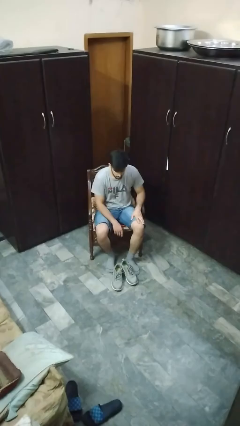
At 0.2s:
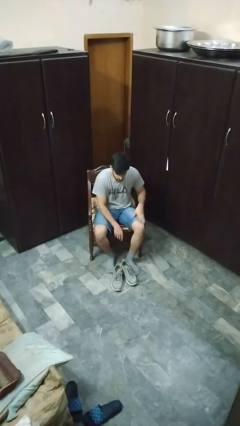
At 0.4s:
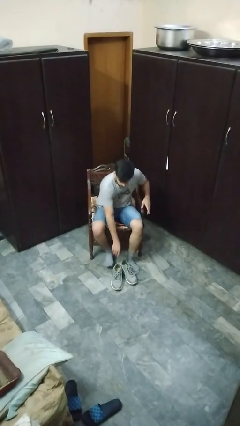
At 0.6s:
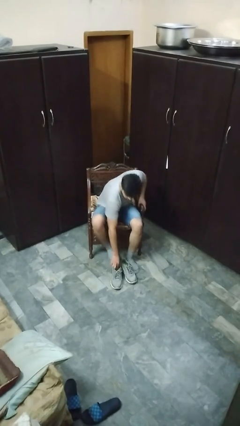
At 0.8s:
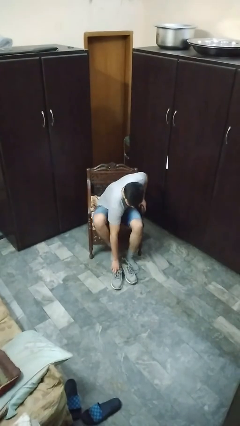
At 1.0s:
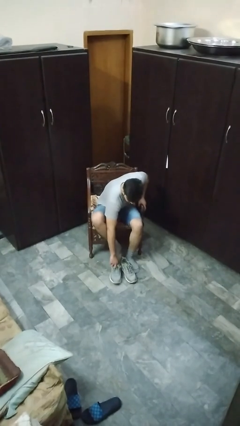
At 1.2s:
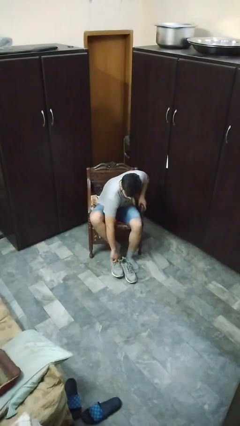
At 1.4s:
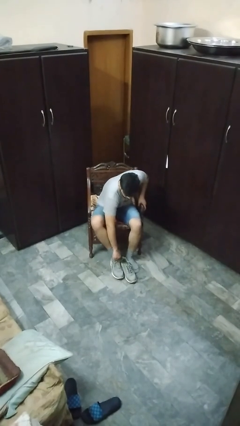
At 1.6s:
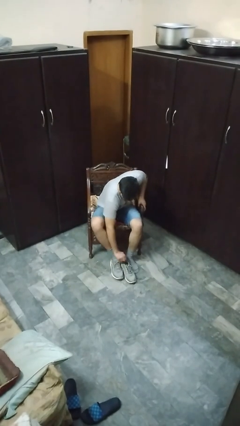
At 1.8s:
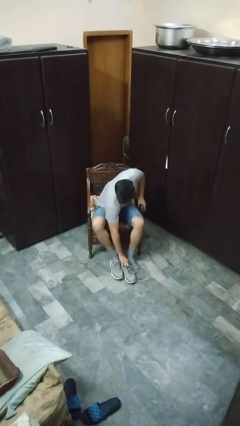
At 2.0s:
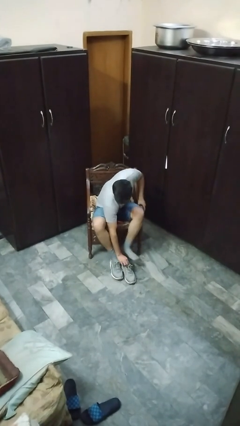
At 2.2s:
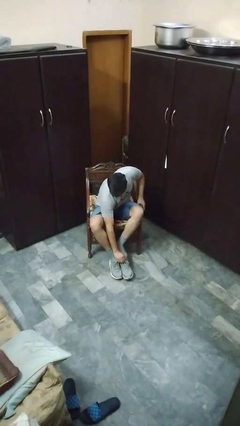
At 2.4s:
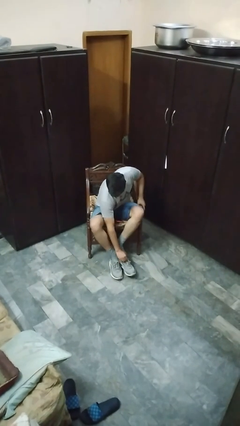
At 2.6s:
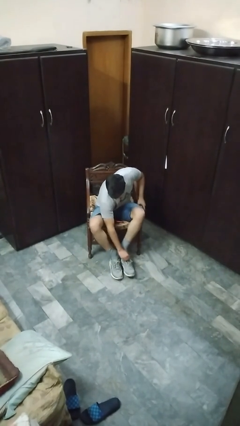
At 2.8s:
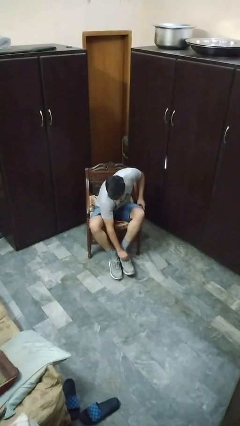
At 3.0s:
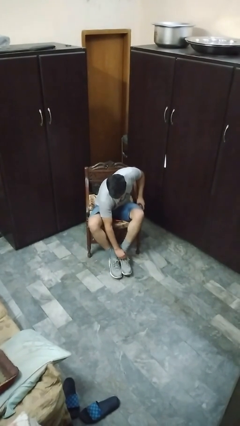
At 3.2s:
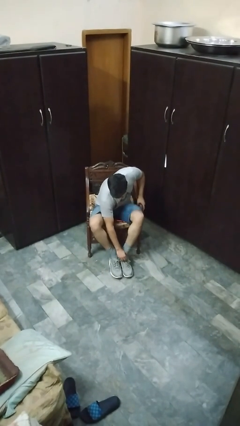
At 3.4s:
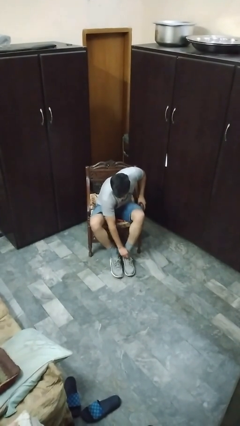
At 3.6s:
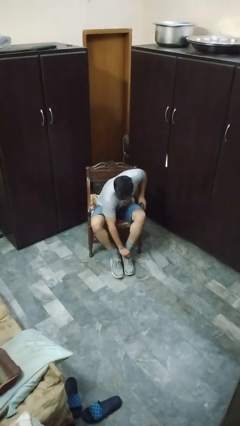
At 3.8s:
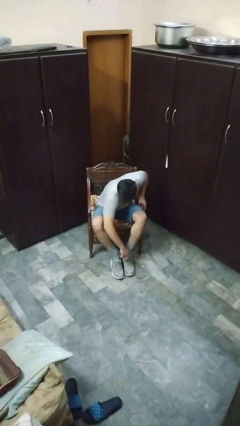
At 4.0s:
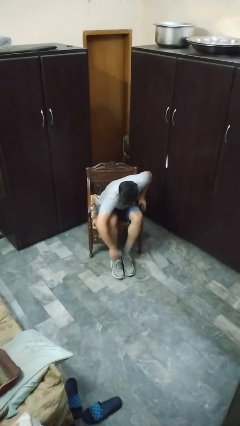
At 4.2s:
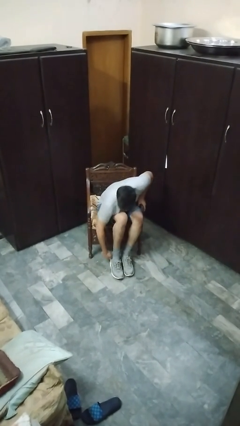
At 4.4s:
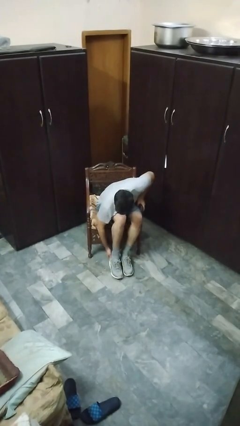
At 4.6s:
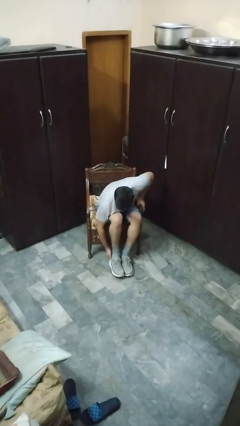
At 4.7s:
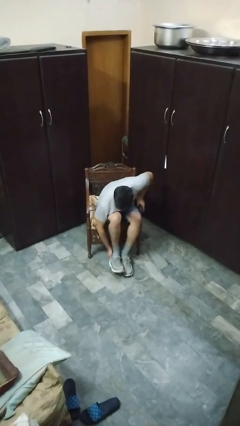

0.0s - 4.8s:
person puts on shoes

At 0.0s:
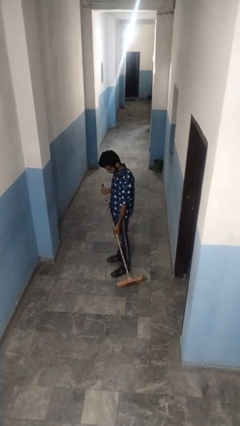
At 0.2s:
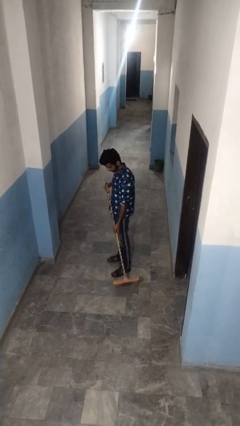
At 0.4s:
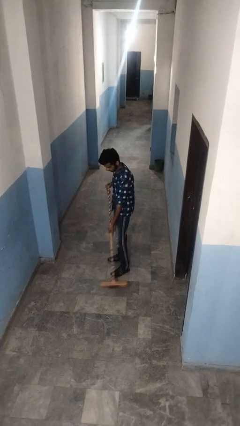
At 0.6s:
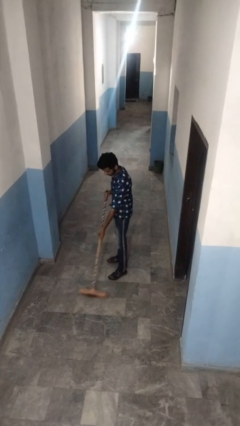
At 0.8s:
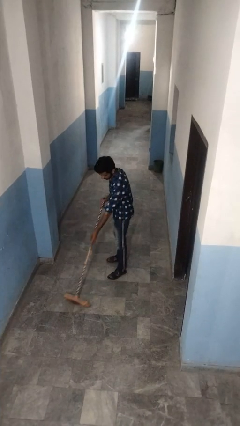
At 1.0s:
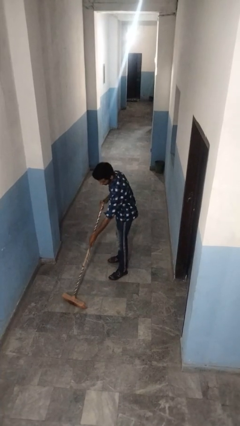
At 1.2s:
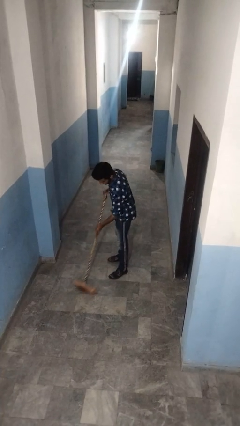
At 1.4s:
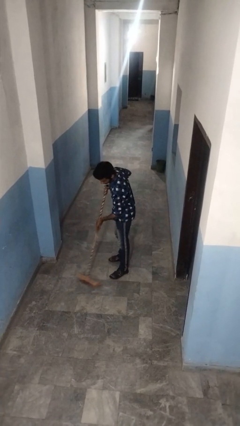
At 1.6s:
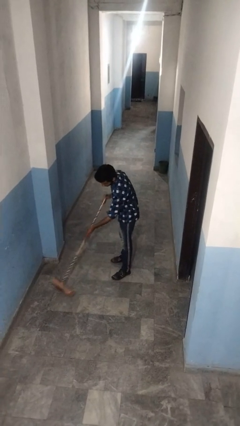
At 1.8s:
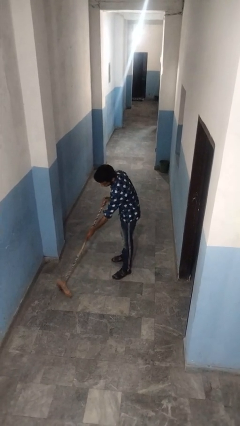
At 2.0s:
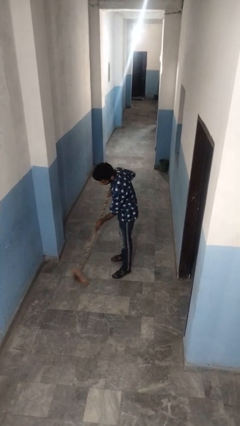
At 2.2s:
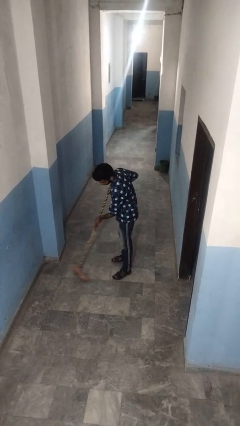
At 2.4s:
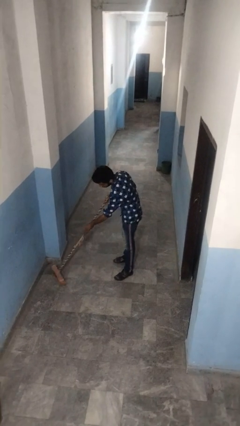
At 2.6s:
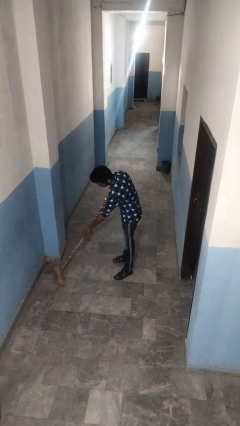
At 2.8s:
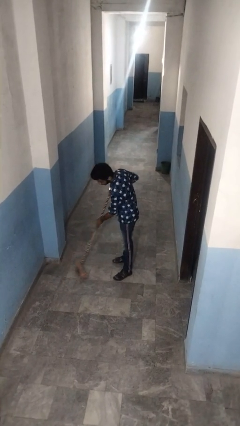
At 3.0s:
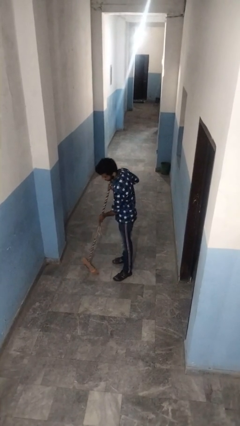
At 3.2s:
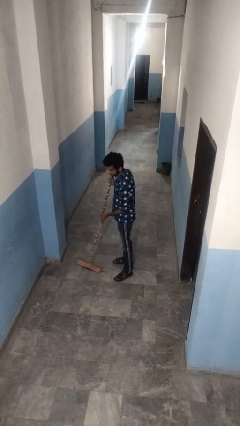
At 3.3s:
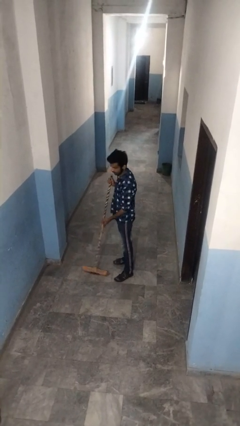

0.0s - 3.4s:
person sweeps floor

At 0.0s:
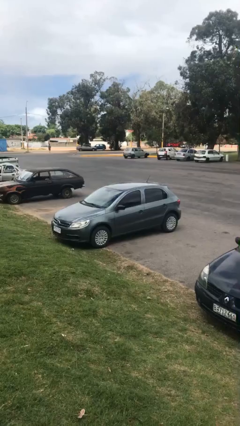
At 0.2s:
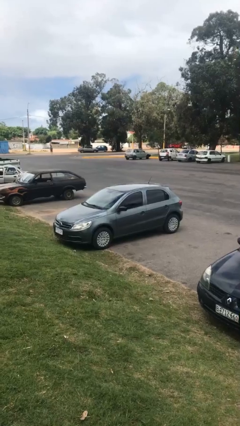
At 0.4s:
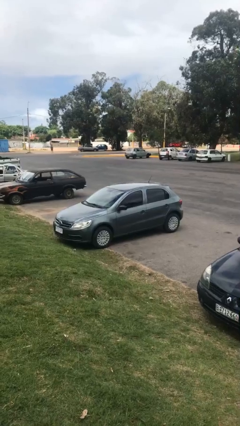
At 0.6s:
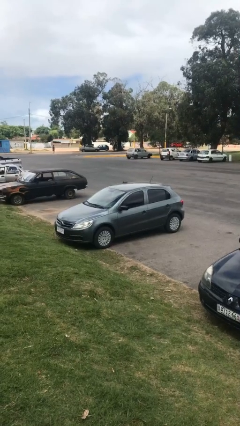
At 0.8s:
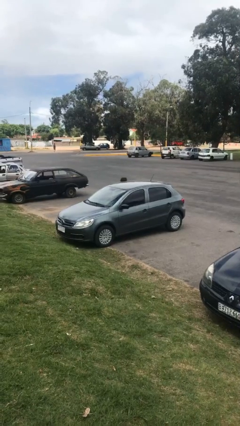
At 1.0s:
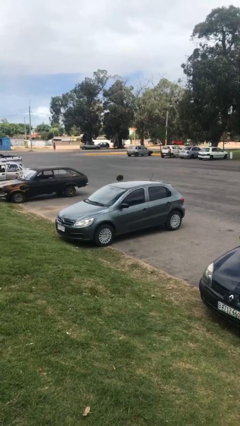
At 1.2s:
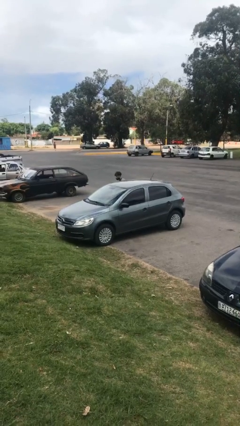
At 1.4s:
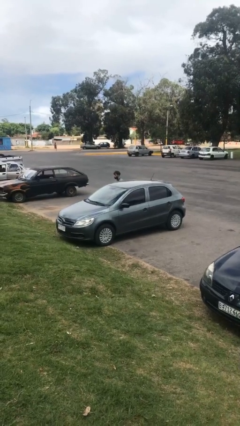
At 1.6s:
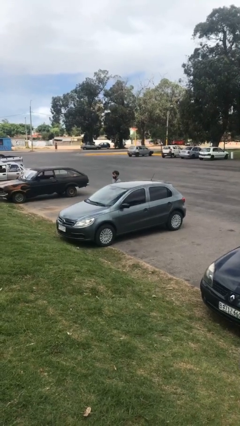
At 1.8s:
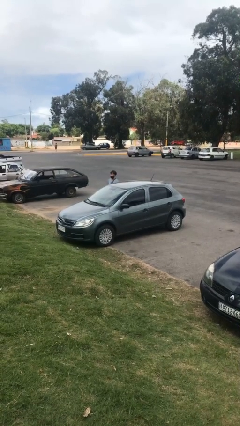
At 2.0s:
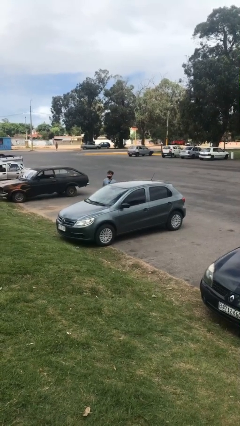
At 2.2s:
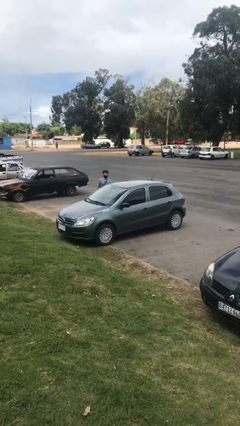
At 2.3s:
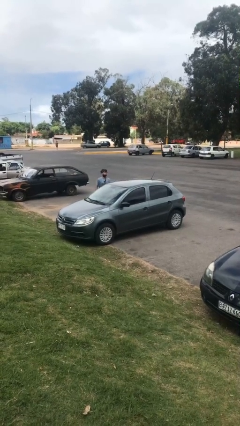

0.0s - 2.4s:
car drops off person

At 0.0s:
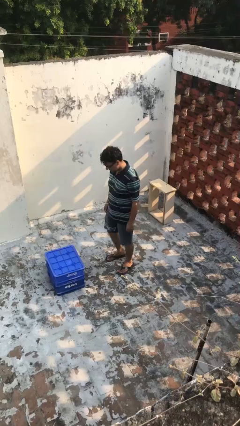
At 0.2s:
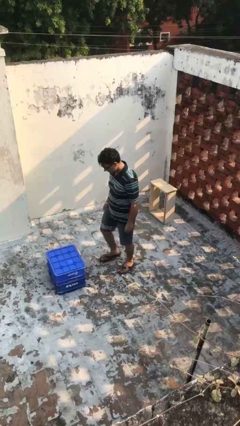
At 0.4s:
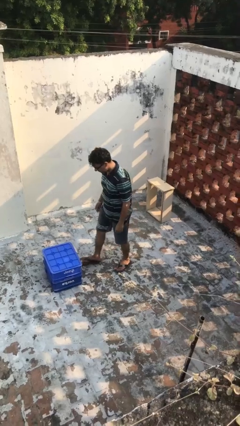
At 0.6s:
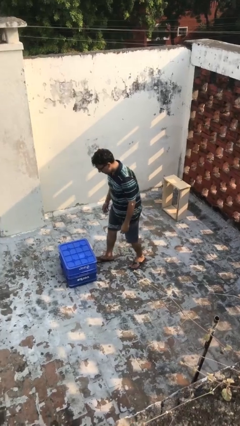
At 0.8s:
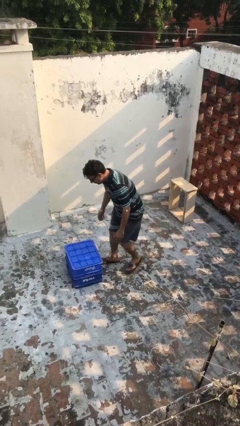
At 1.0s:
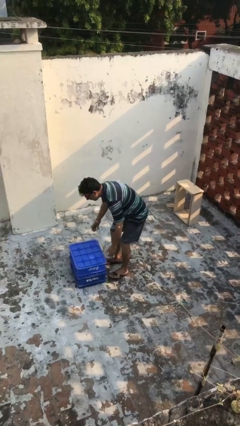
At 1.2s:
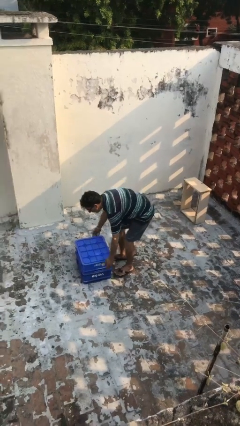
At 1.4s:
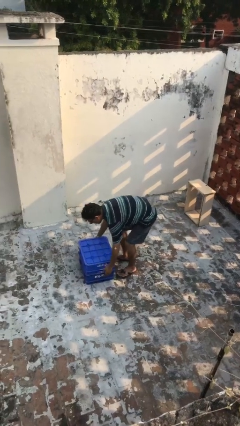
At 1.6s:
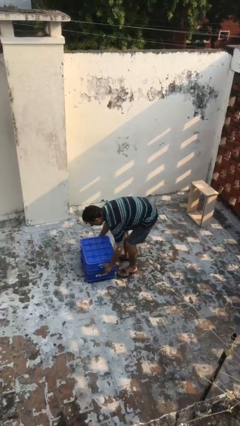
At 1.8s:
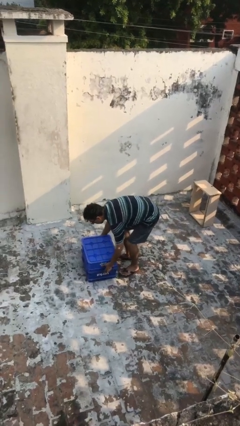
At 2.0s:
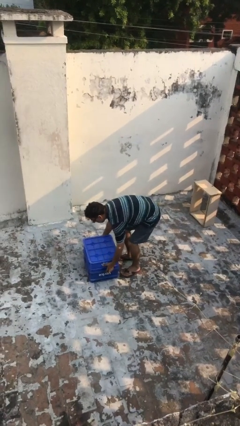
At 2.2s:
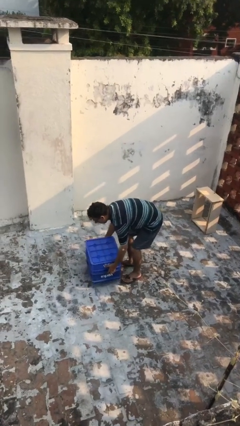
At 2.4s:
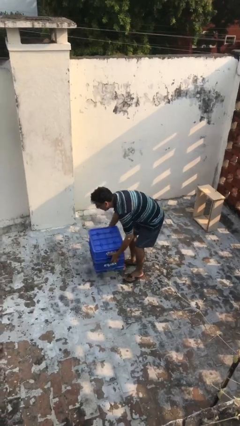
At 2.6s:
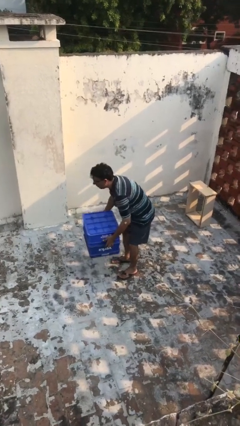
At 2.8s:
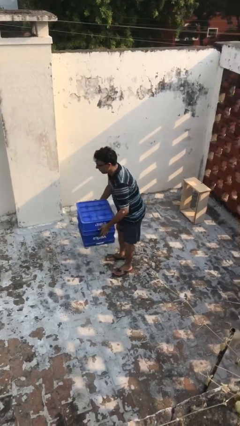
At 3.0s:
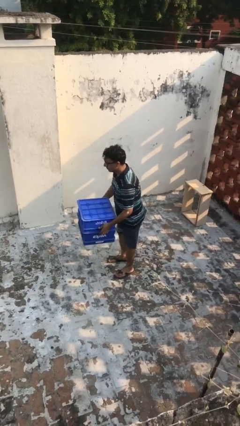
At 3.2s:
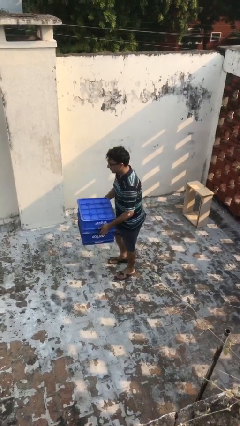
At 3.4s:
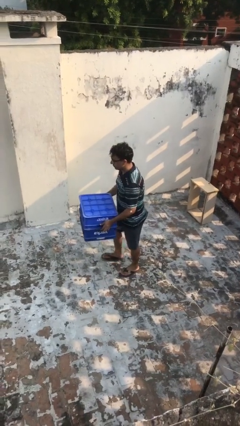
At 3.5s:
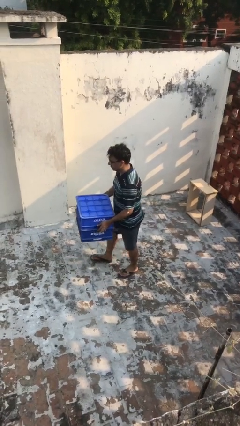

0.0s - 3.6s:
person picks up object from floor

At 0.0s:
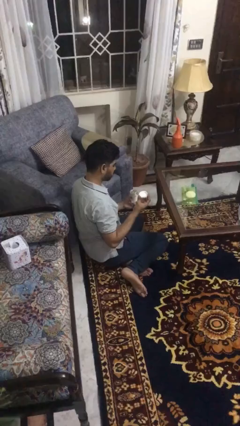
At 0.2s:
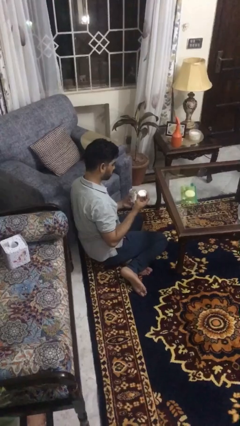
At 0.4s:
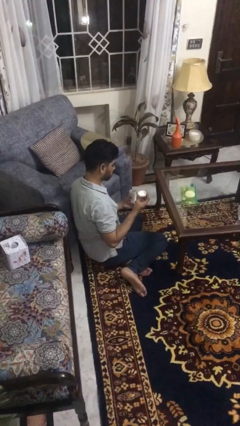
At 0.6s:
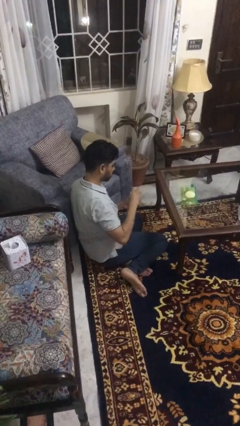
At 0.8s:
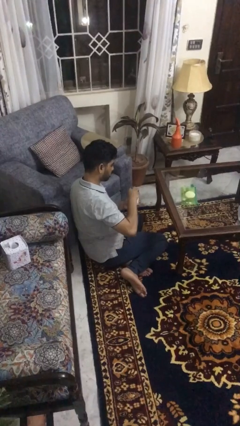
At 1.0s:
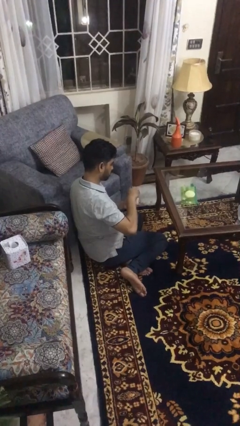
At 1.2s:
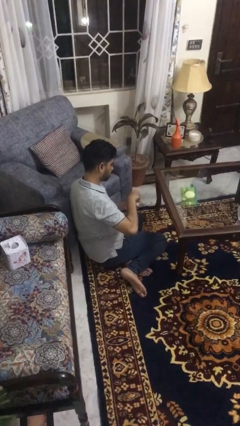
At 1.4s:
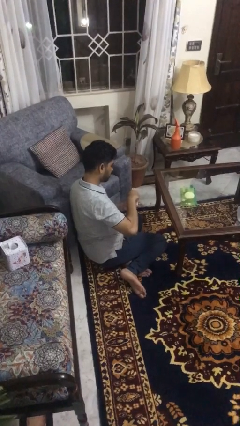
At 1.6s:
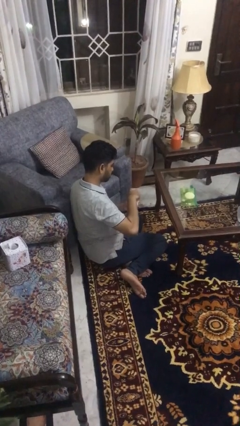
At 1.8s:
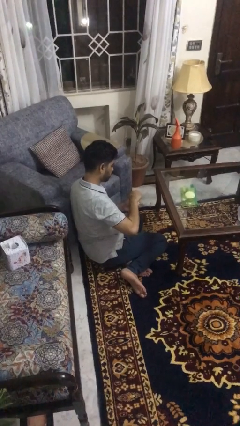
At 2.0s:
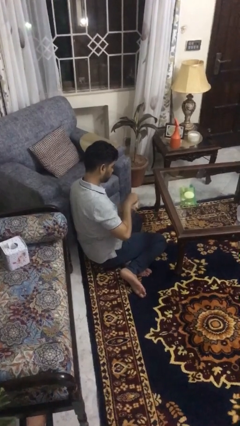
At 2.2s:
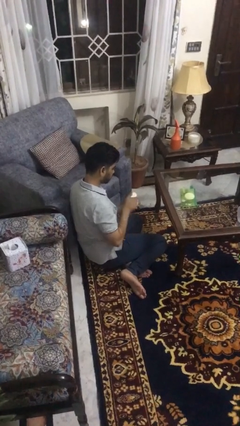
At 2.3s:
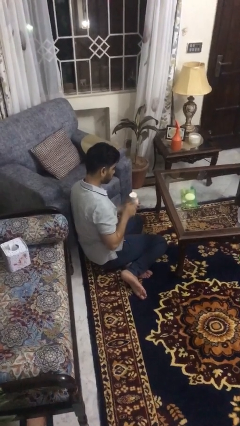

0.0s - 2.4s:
person closes jar

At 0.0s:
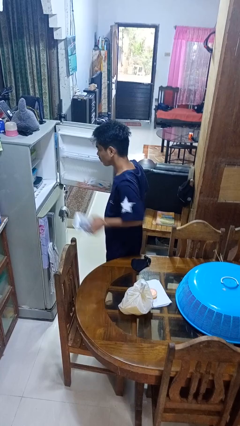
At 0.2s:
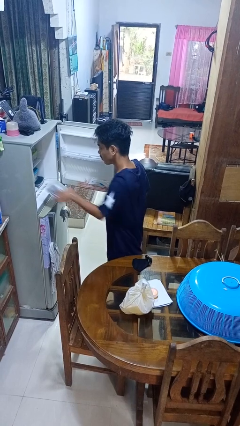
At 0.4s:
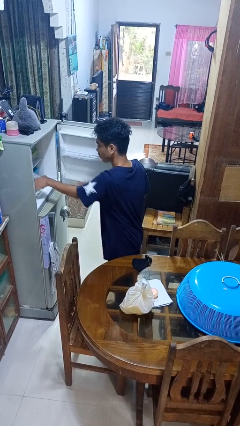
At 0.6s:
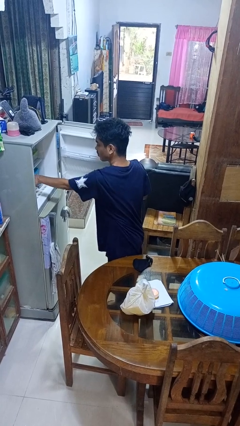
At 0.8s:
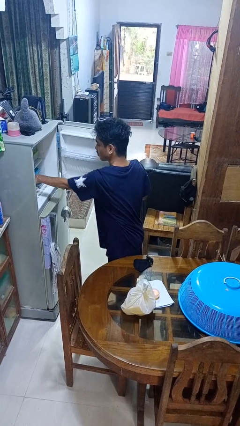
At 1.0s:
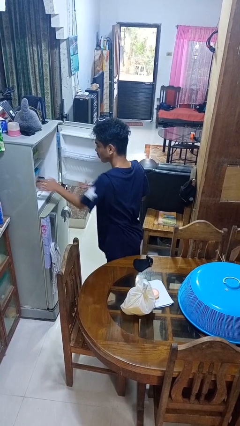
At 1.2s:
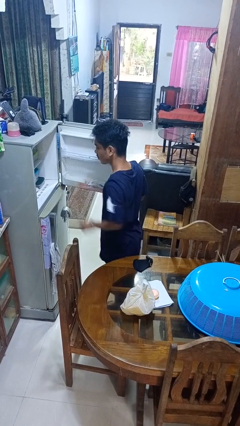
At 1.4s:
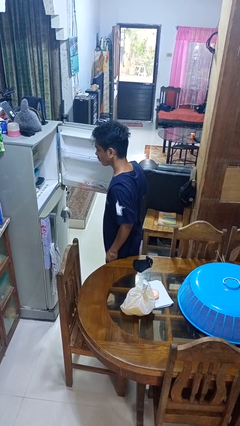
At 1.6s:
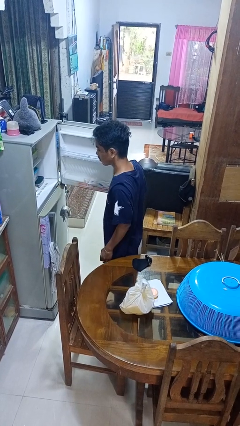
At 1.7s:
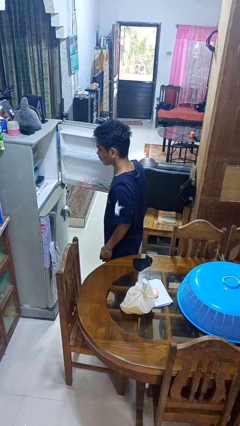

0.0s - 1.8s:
person puts object into refrigerator
